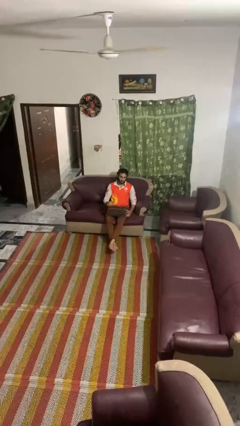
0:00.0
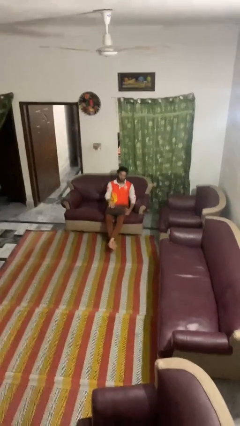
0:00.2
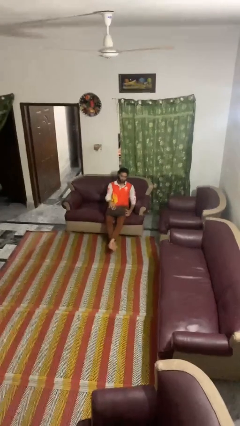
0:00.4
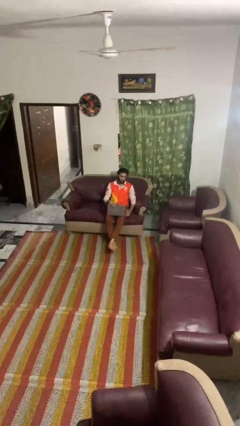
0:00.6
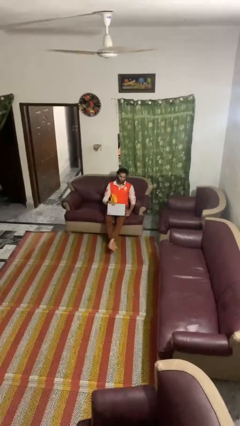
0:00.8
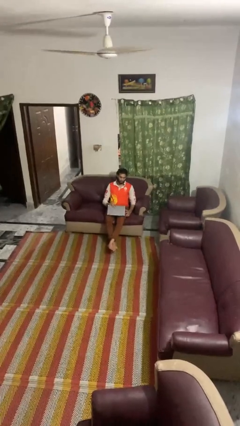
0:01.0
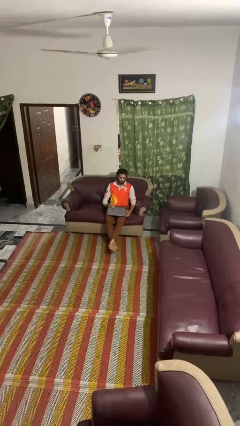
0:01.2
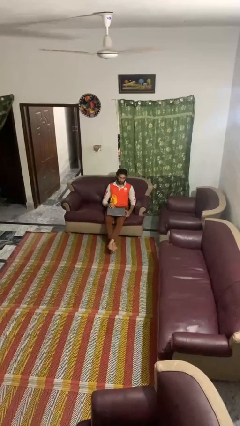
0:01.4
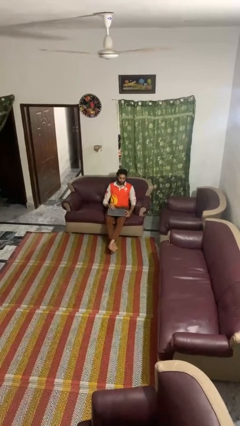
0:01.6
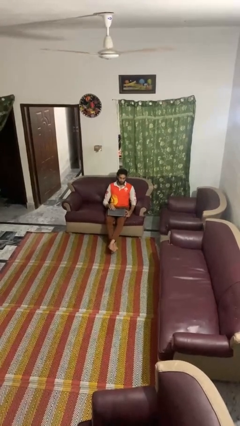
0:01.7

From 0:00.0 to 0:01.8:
person closes laptop

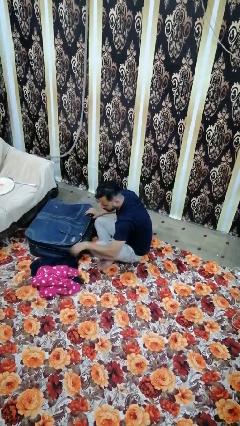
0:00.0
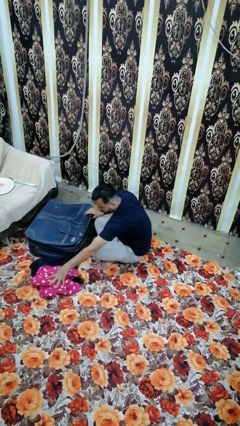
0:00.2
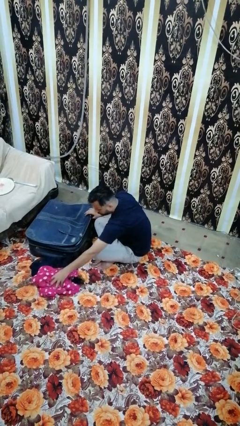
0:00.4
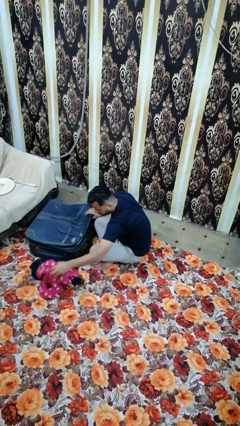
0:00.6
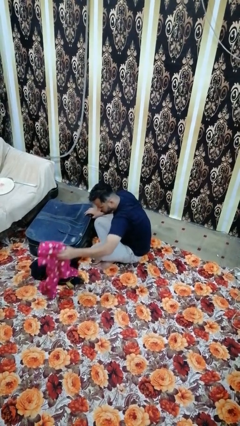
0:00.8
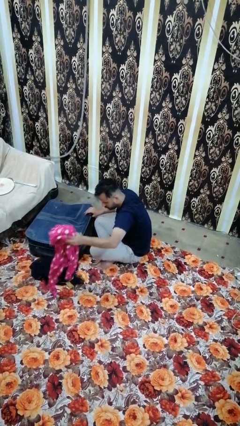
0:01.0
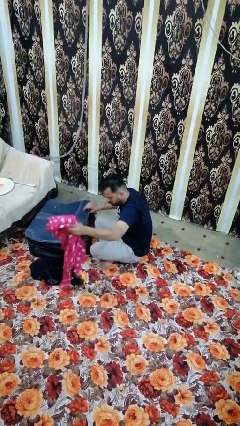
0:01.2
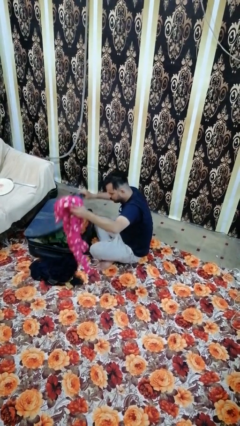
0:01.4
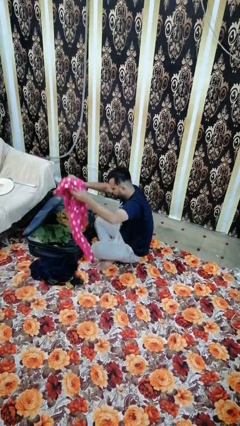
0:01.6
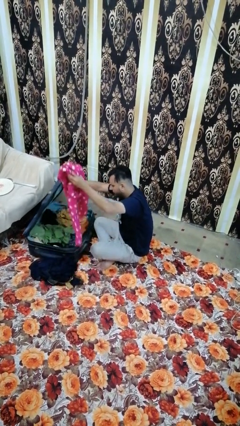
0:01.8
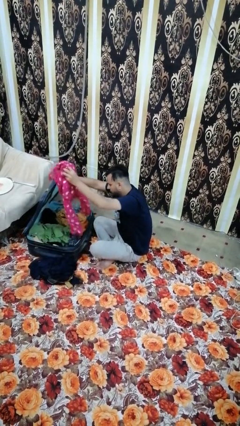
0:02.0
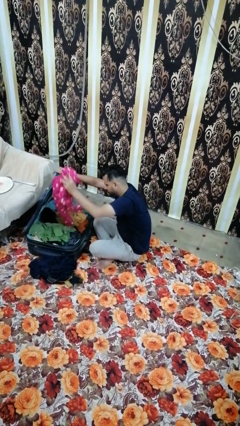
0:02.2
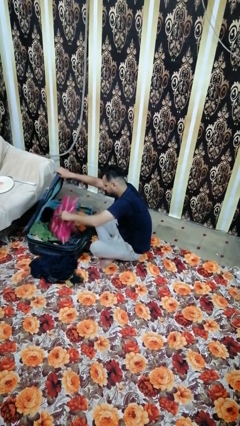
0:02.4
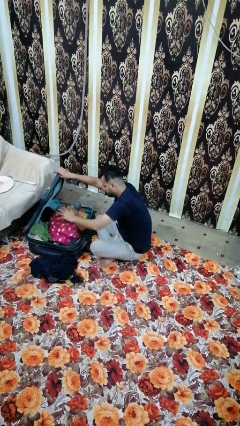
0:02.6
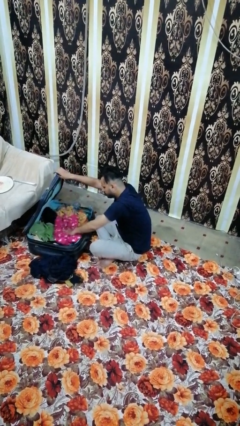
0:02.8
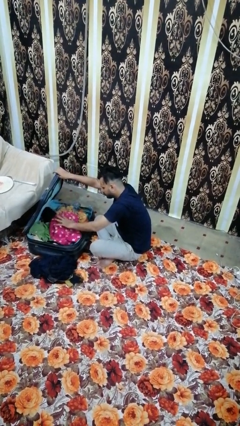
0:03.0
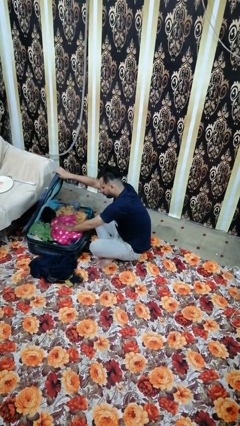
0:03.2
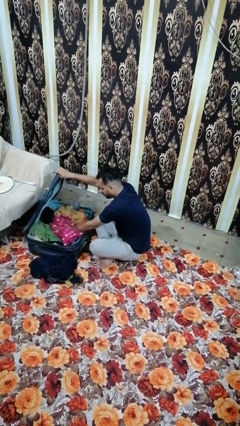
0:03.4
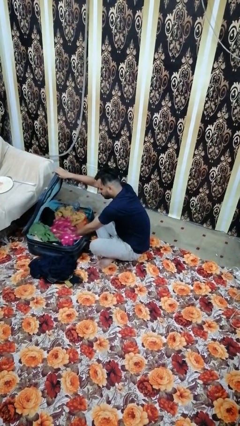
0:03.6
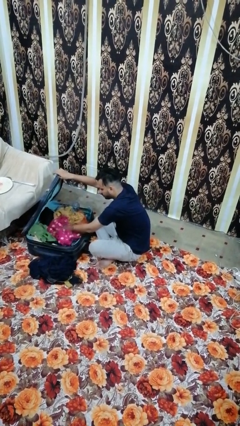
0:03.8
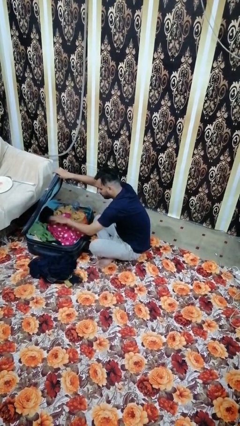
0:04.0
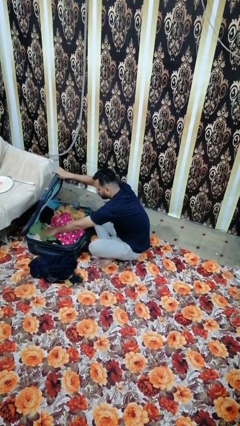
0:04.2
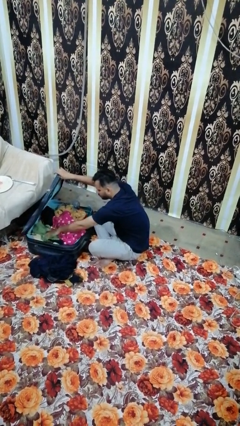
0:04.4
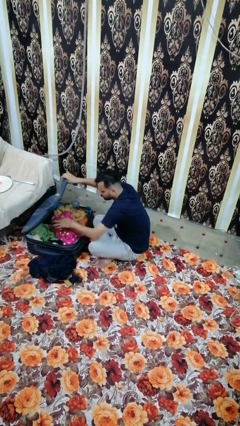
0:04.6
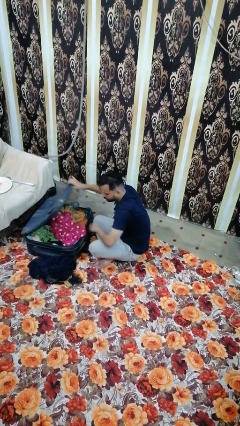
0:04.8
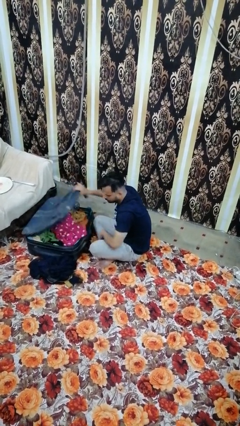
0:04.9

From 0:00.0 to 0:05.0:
person loads clothes into suitcase

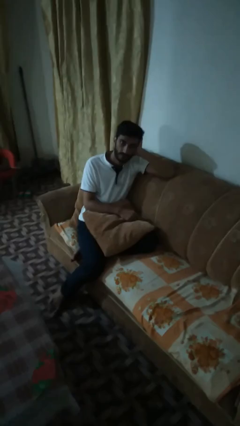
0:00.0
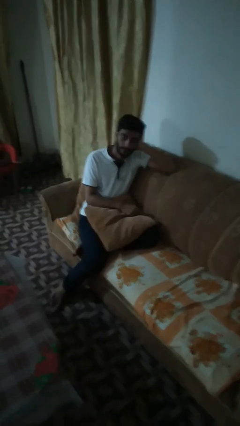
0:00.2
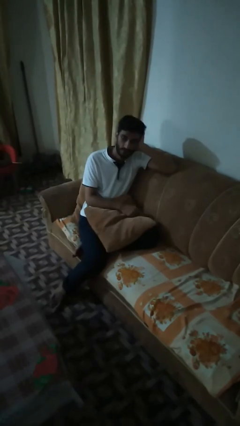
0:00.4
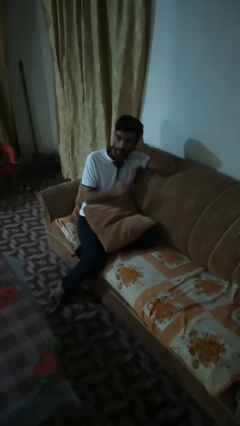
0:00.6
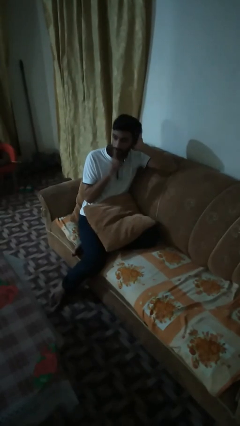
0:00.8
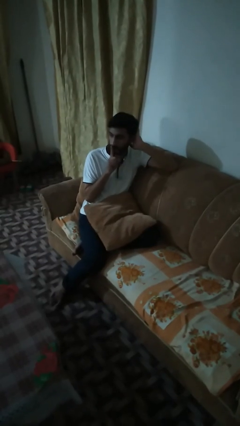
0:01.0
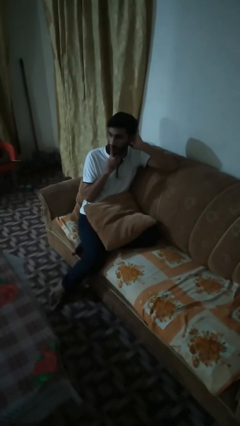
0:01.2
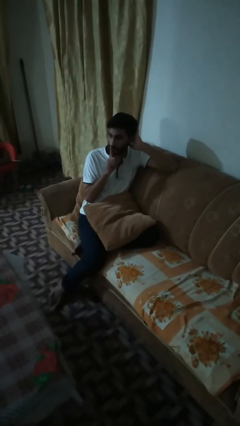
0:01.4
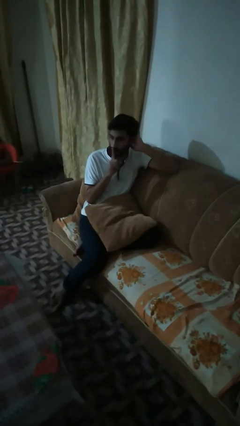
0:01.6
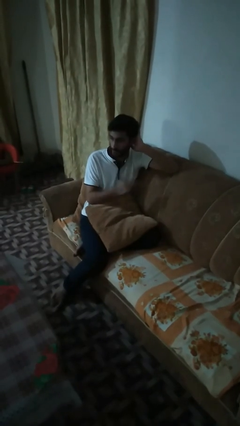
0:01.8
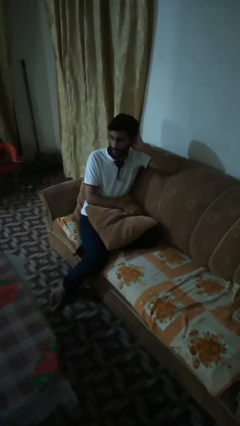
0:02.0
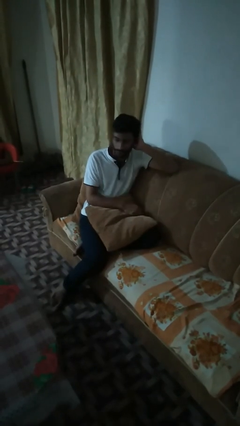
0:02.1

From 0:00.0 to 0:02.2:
person gestures be quiet

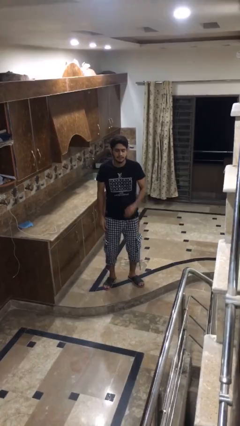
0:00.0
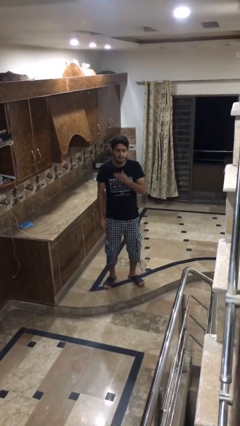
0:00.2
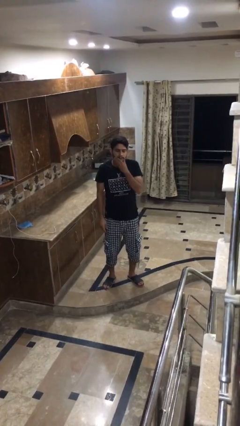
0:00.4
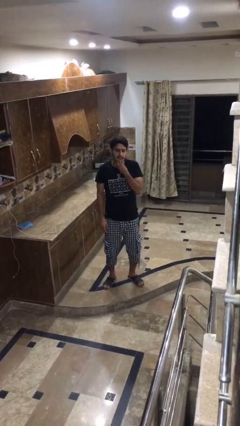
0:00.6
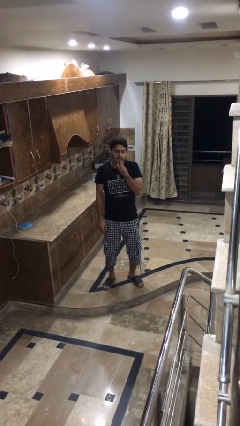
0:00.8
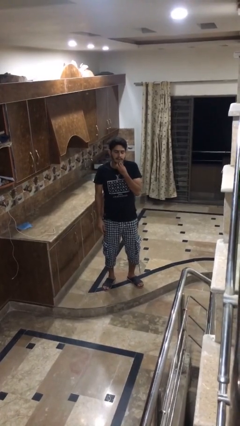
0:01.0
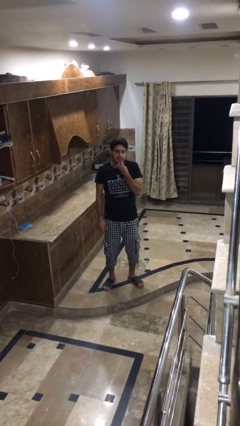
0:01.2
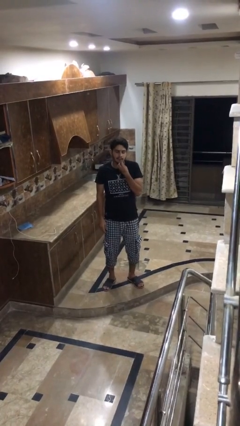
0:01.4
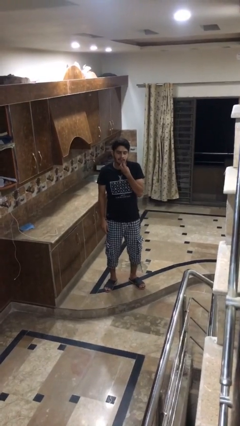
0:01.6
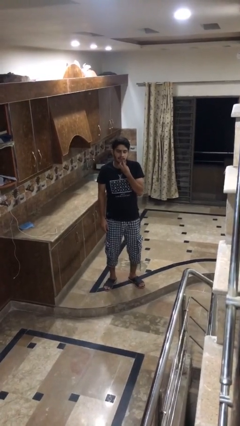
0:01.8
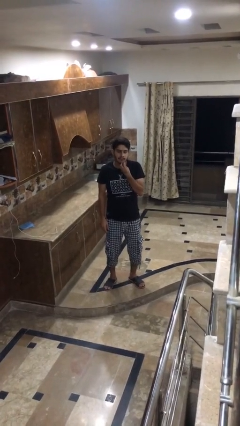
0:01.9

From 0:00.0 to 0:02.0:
person strokes chin

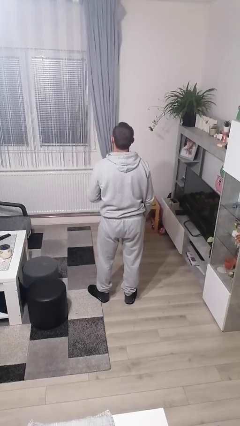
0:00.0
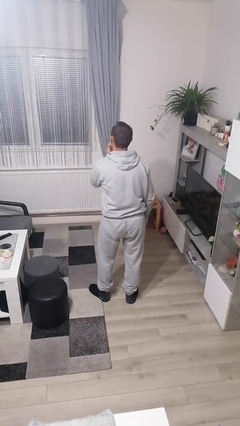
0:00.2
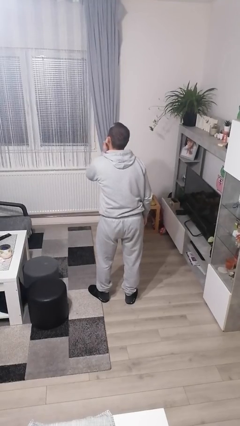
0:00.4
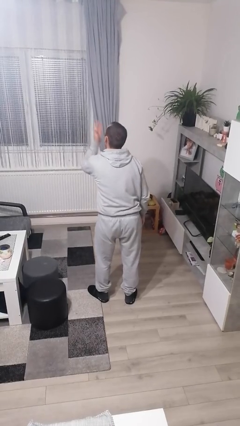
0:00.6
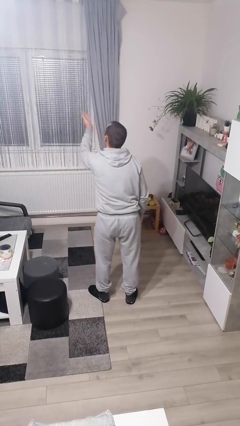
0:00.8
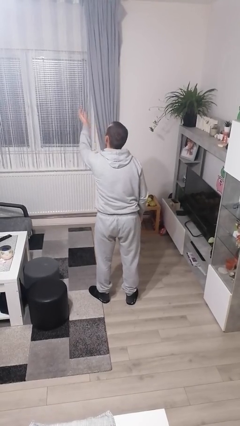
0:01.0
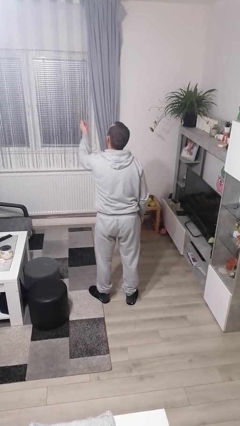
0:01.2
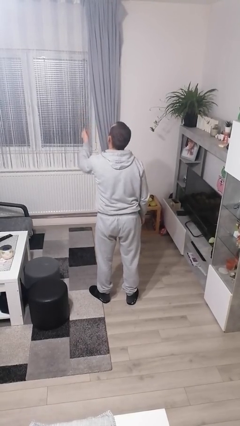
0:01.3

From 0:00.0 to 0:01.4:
person gestures blow kiss

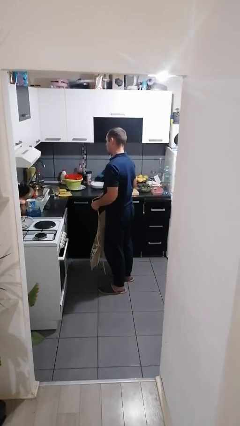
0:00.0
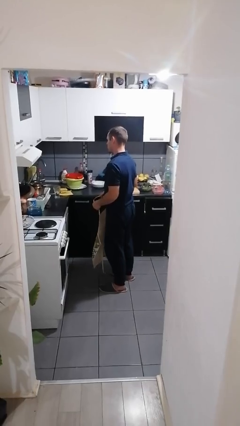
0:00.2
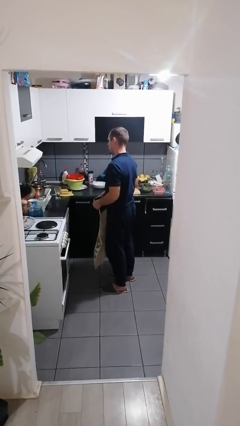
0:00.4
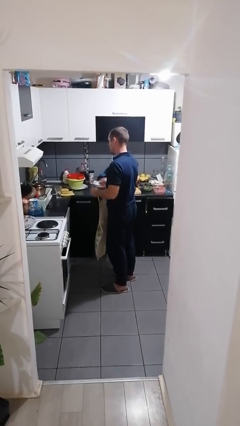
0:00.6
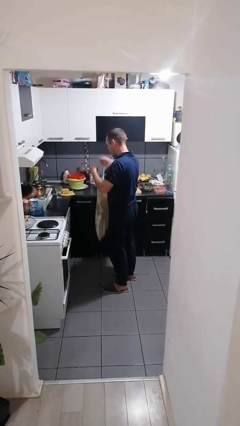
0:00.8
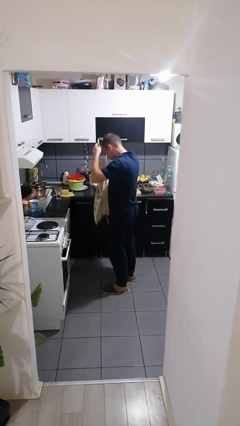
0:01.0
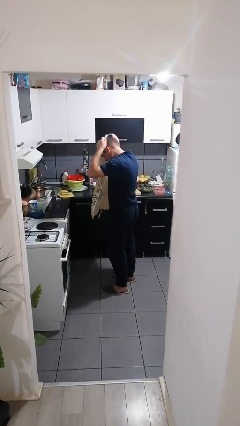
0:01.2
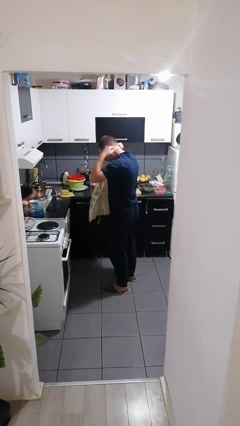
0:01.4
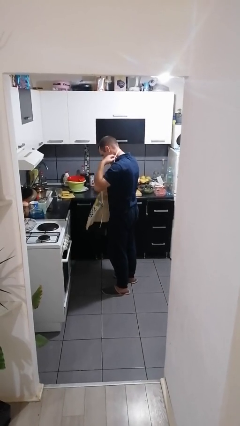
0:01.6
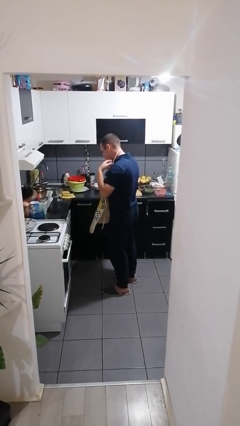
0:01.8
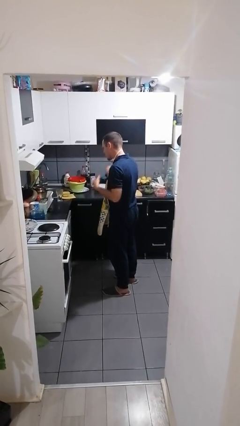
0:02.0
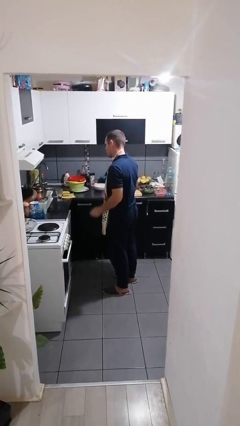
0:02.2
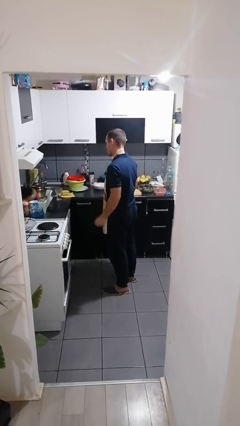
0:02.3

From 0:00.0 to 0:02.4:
person puts on apron

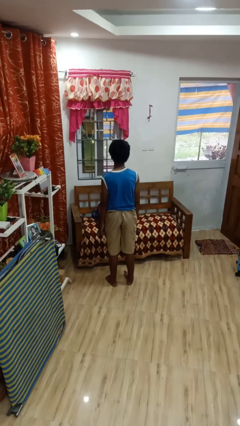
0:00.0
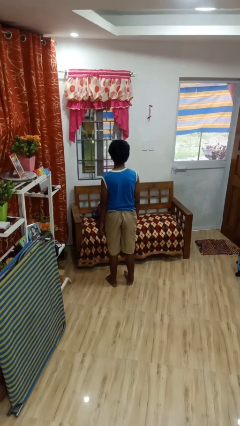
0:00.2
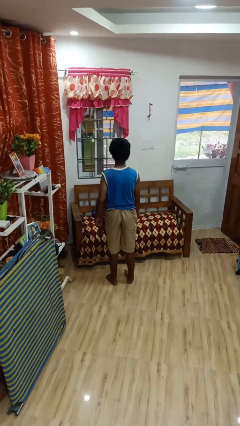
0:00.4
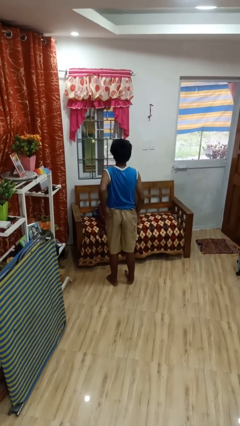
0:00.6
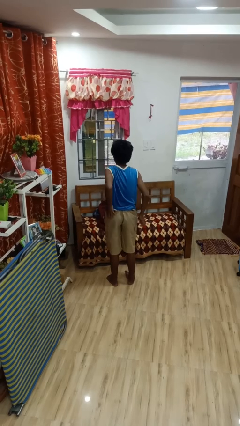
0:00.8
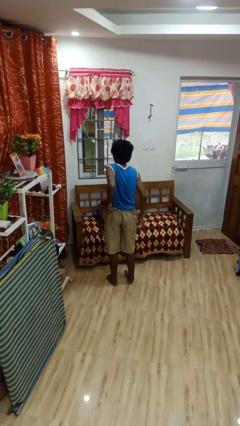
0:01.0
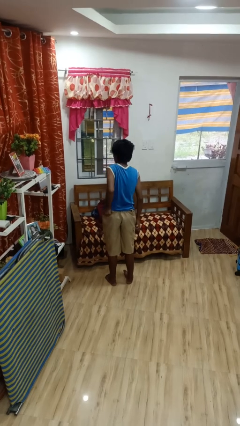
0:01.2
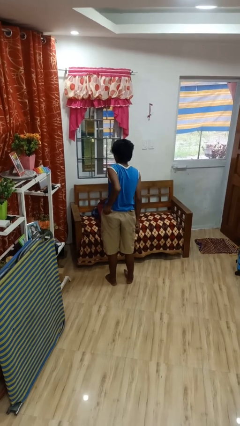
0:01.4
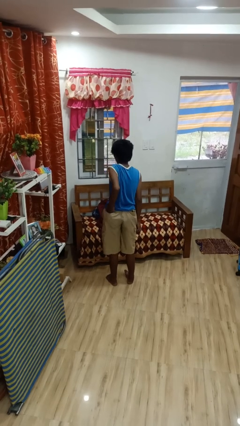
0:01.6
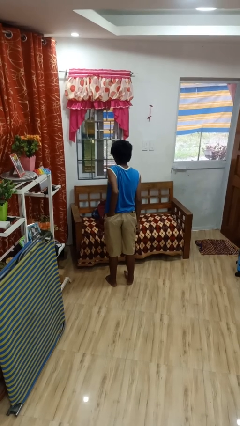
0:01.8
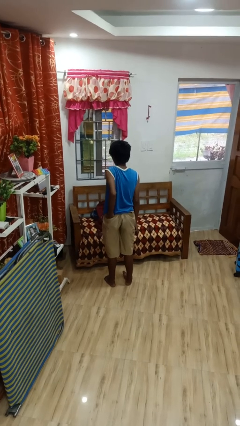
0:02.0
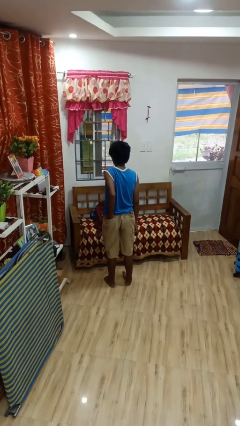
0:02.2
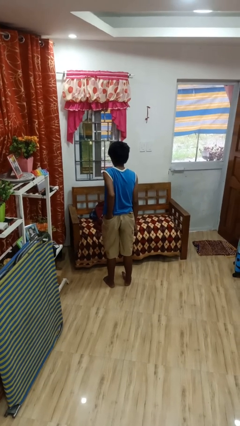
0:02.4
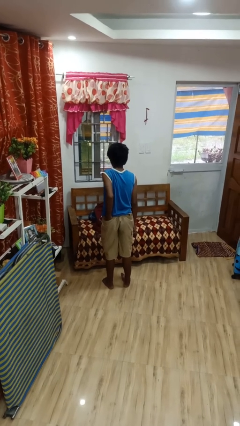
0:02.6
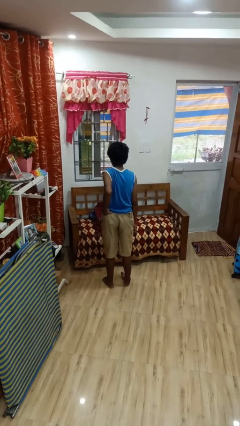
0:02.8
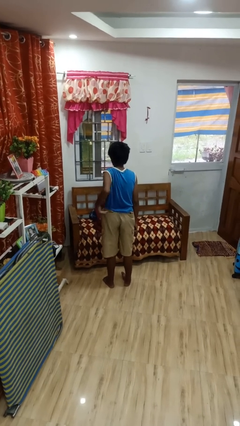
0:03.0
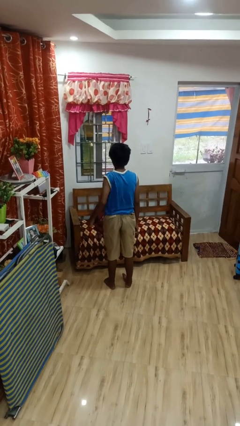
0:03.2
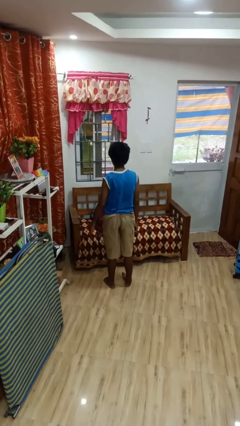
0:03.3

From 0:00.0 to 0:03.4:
person puts hands in back pockets
